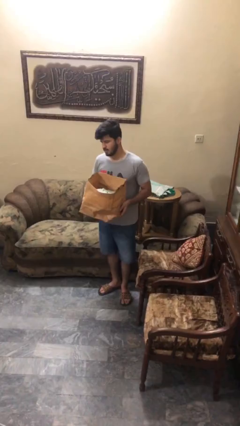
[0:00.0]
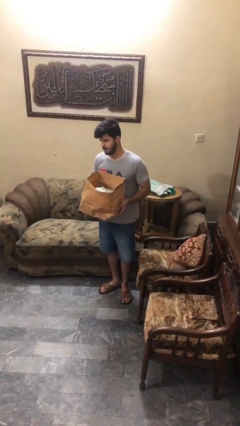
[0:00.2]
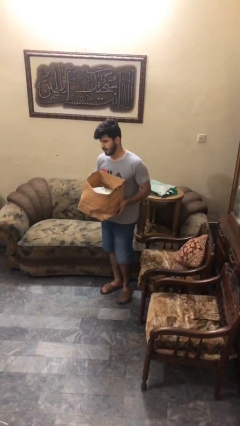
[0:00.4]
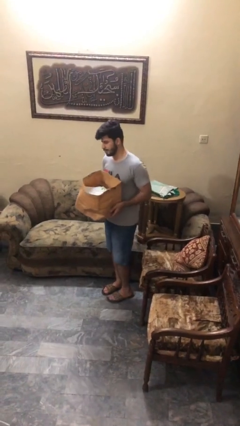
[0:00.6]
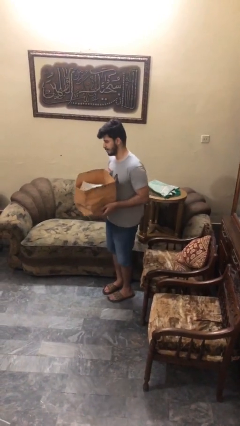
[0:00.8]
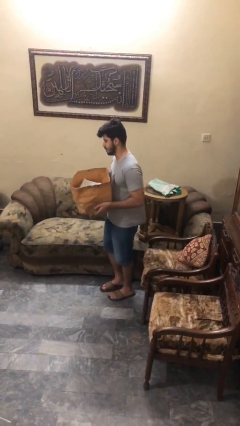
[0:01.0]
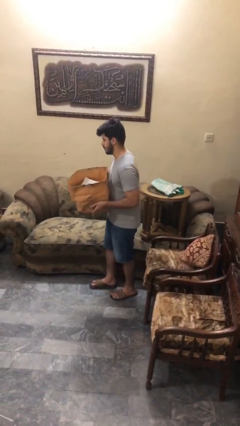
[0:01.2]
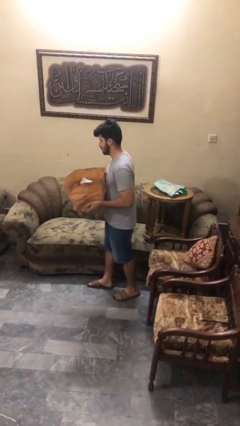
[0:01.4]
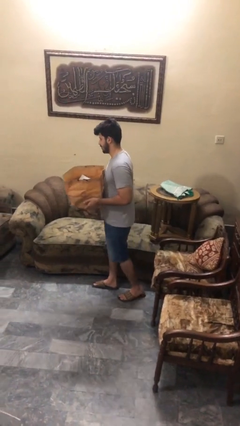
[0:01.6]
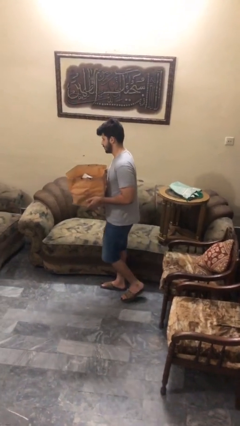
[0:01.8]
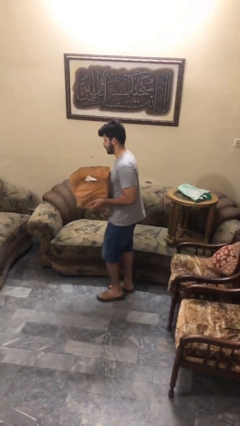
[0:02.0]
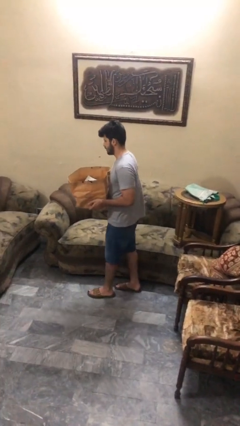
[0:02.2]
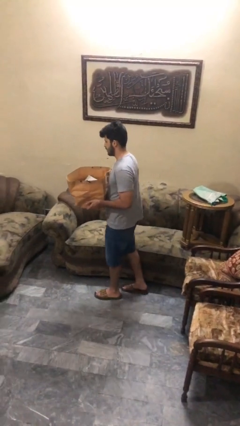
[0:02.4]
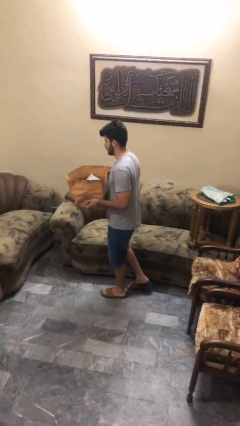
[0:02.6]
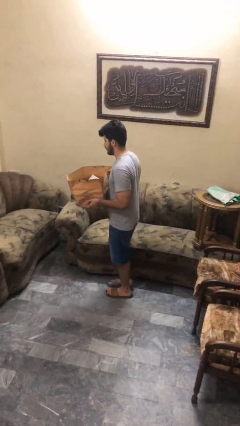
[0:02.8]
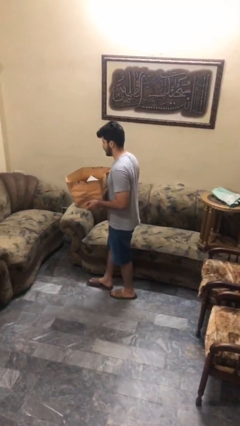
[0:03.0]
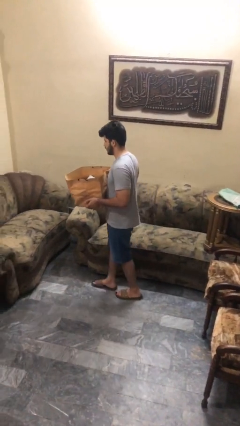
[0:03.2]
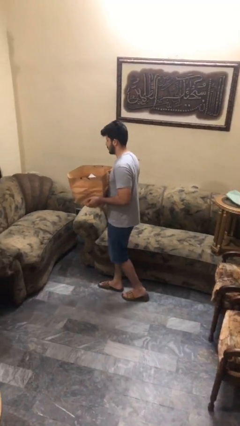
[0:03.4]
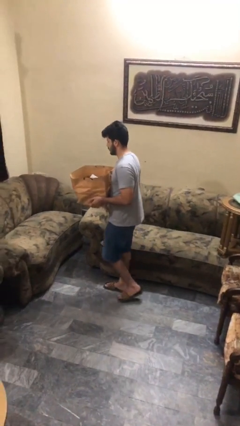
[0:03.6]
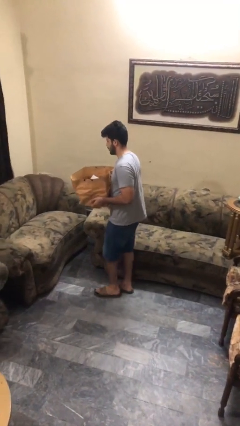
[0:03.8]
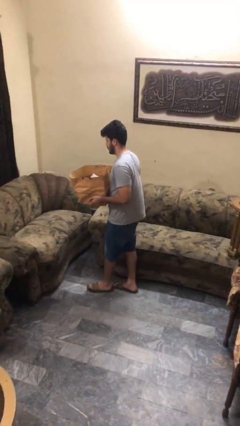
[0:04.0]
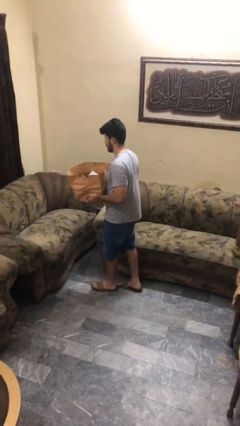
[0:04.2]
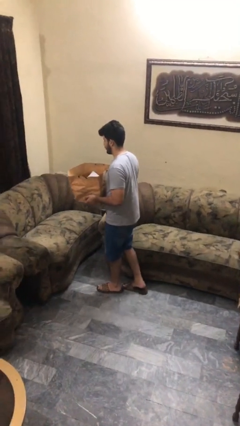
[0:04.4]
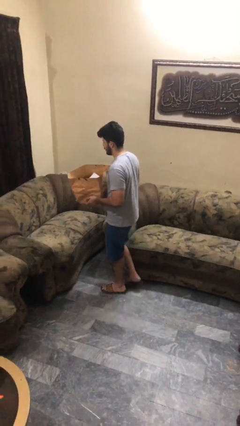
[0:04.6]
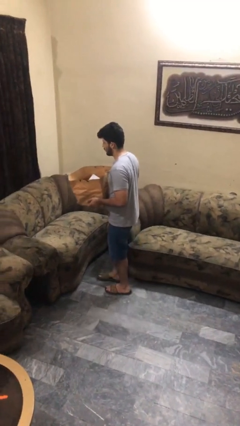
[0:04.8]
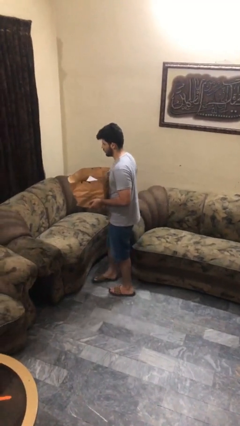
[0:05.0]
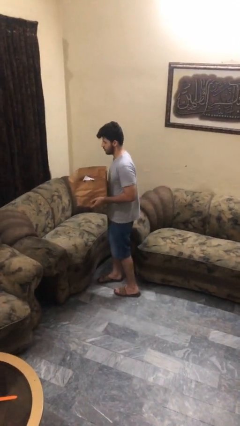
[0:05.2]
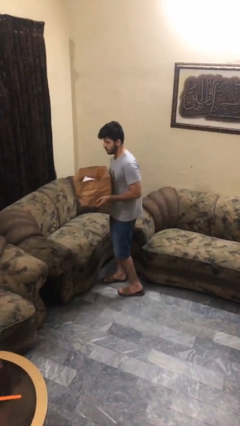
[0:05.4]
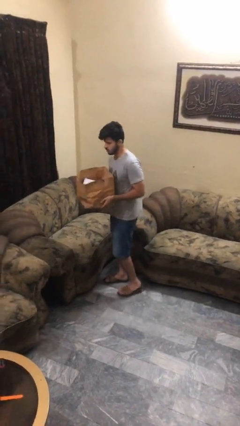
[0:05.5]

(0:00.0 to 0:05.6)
person carries groceries

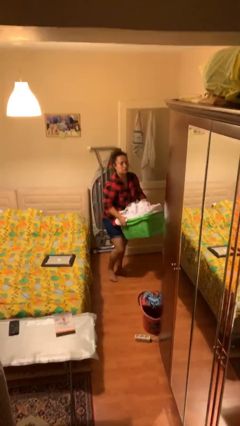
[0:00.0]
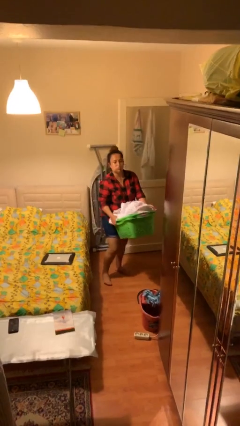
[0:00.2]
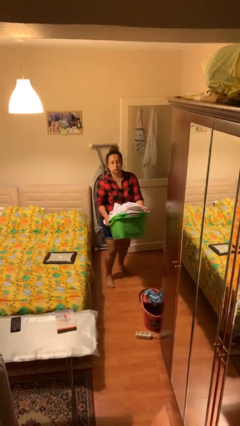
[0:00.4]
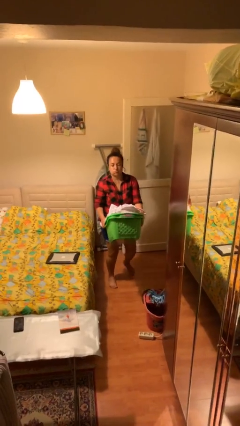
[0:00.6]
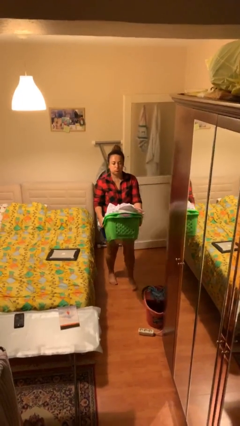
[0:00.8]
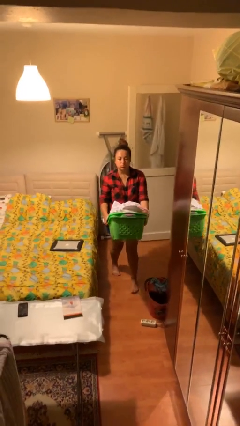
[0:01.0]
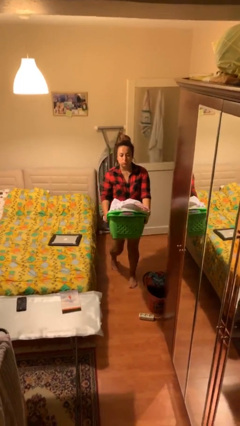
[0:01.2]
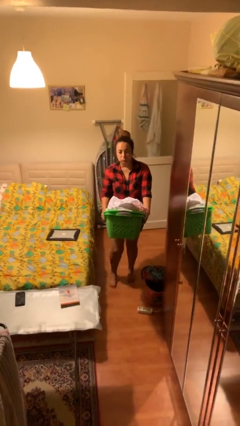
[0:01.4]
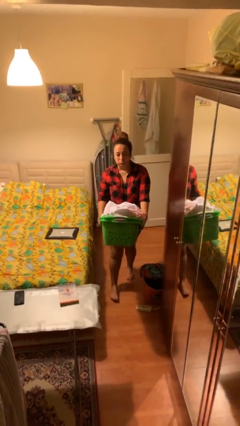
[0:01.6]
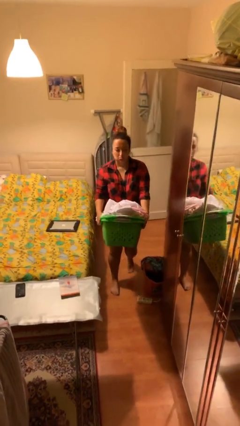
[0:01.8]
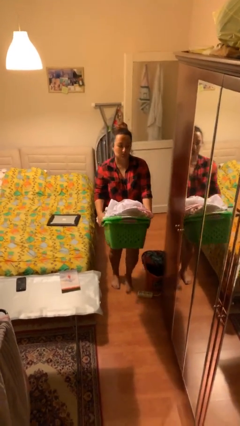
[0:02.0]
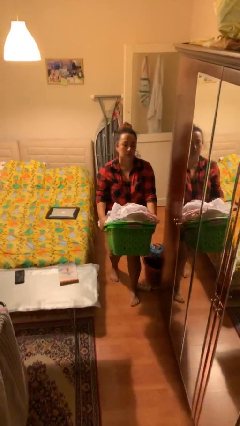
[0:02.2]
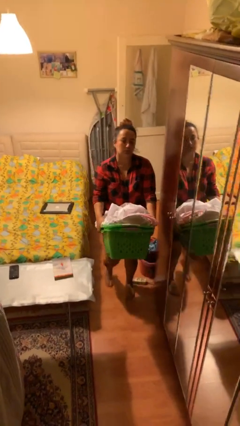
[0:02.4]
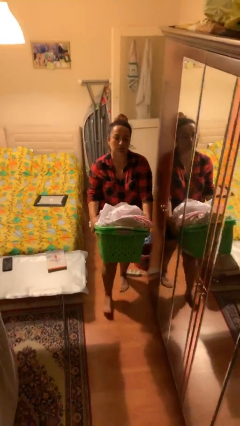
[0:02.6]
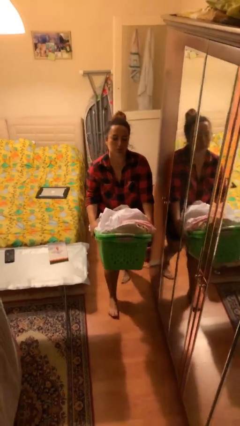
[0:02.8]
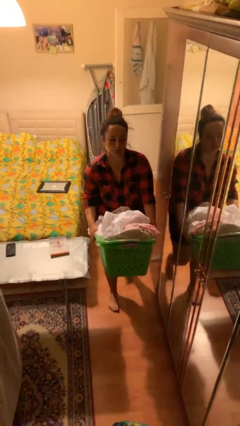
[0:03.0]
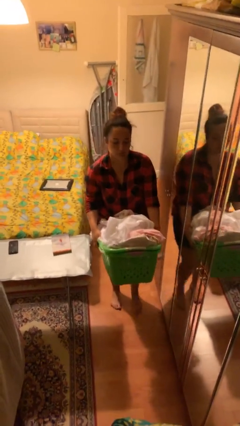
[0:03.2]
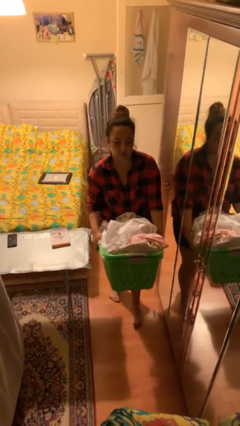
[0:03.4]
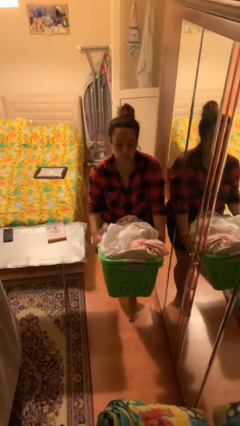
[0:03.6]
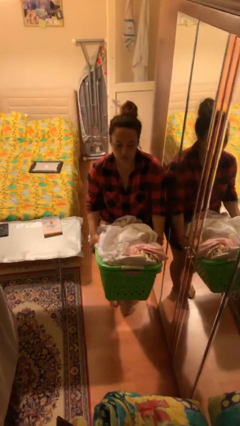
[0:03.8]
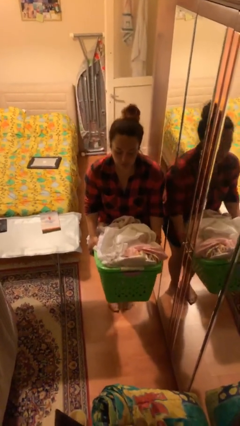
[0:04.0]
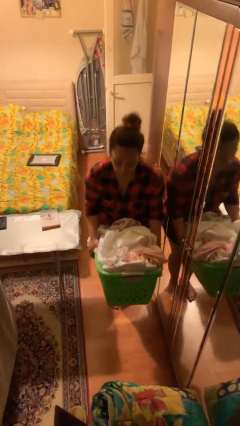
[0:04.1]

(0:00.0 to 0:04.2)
person carries heavy object

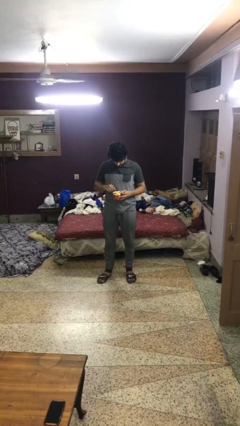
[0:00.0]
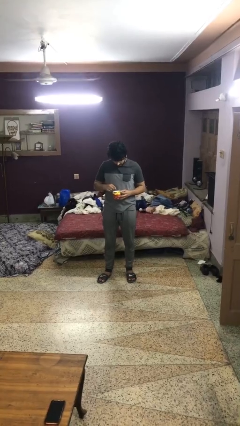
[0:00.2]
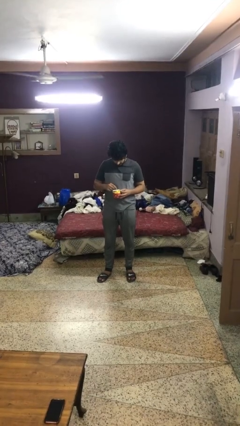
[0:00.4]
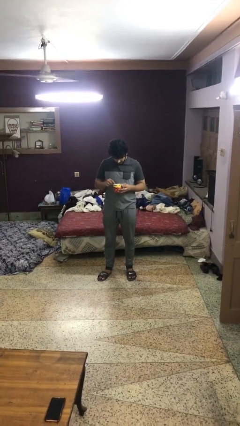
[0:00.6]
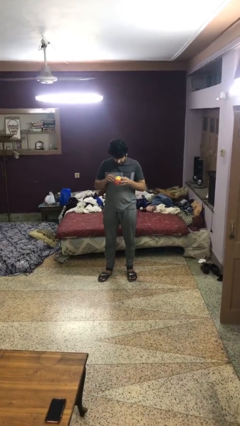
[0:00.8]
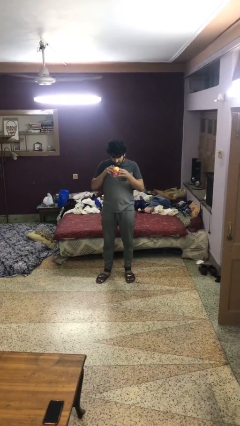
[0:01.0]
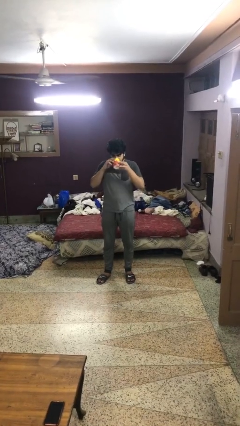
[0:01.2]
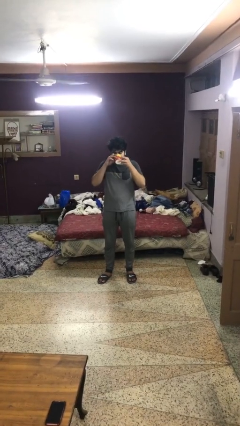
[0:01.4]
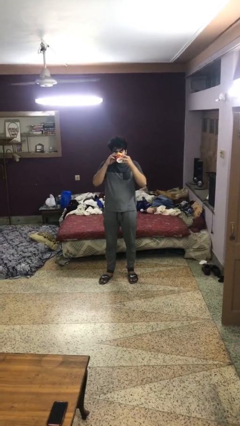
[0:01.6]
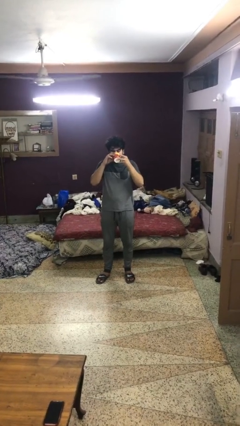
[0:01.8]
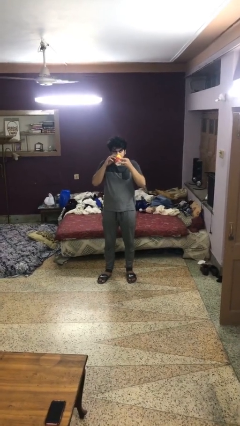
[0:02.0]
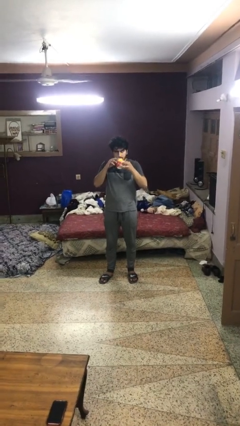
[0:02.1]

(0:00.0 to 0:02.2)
person drinks from mug

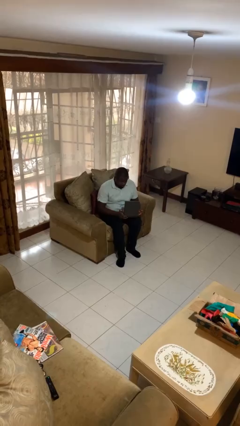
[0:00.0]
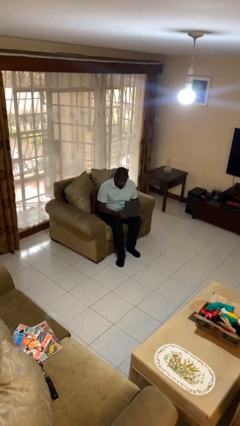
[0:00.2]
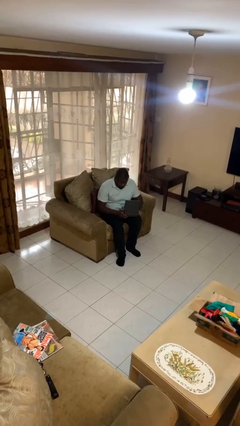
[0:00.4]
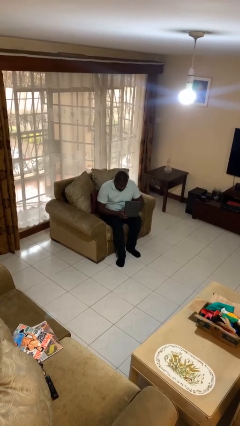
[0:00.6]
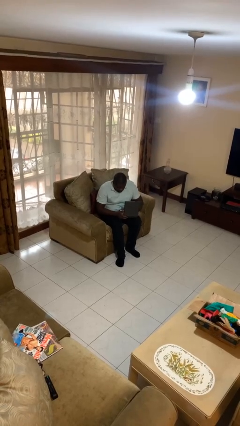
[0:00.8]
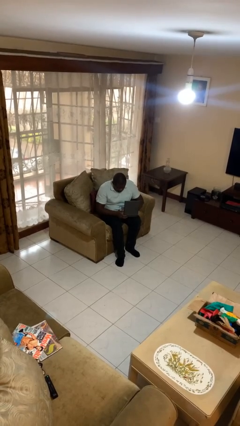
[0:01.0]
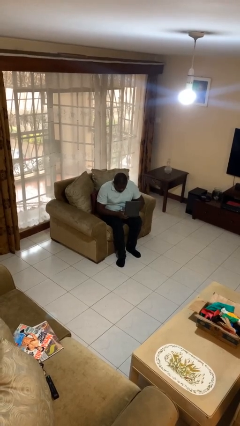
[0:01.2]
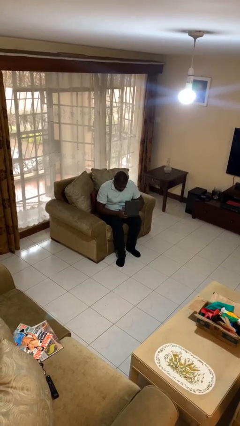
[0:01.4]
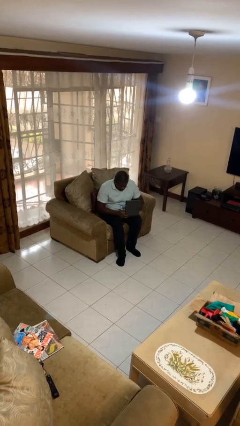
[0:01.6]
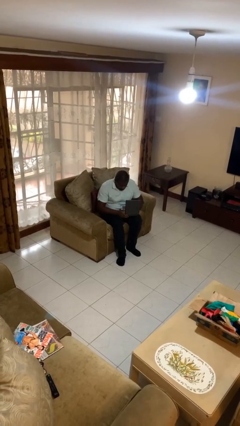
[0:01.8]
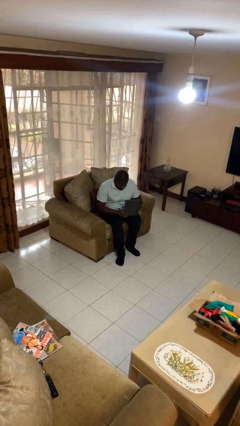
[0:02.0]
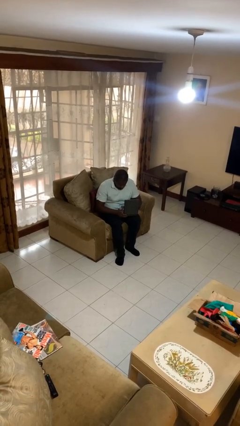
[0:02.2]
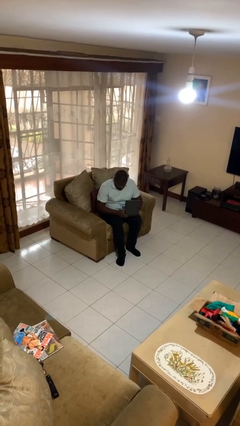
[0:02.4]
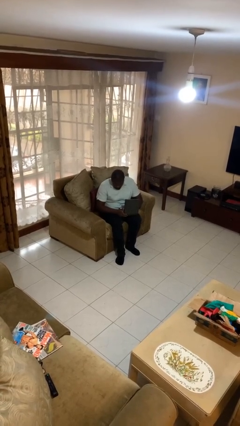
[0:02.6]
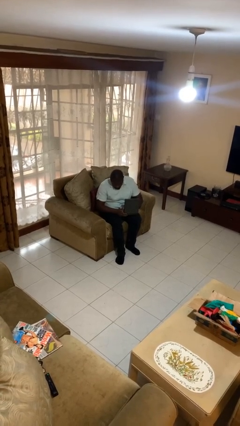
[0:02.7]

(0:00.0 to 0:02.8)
person searches jewelry box

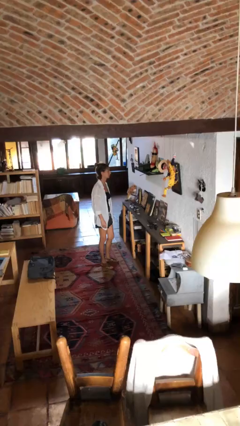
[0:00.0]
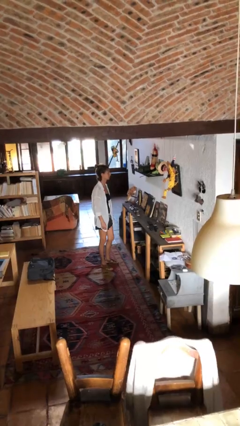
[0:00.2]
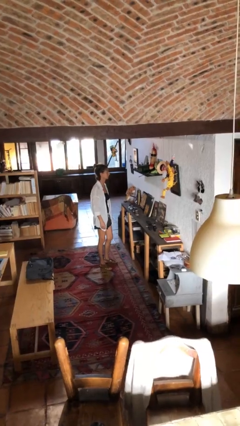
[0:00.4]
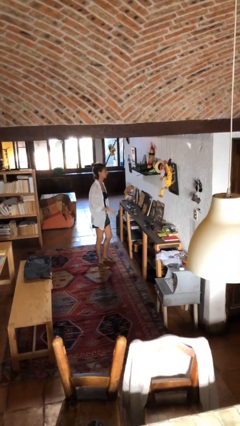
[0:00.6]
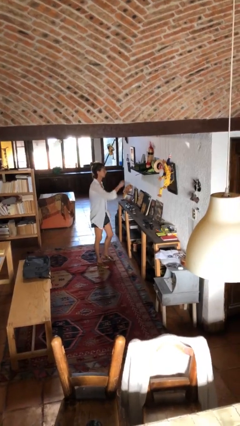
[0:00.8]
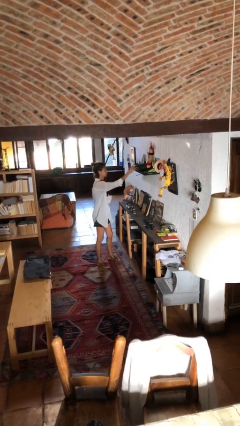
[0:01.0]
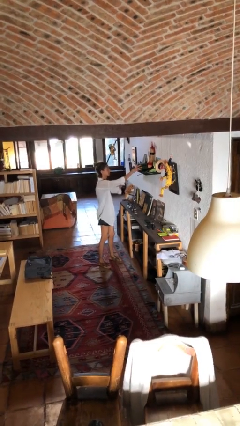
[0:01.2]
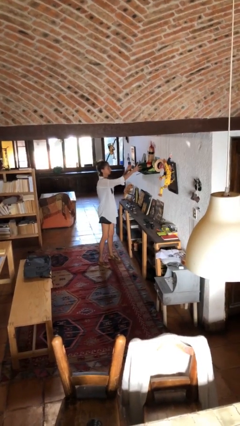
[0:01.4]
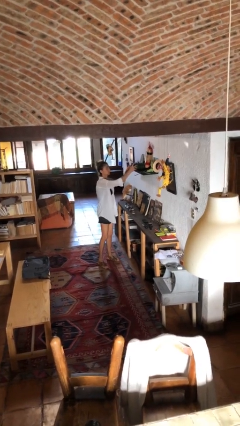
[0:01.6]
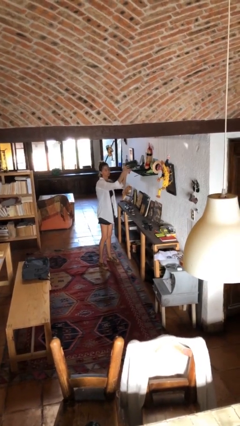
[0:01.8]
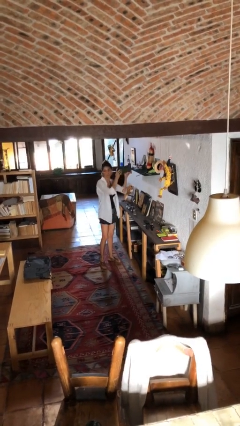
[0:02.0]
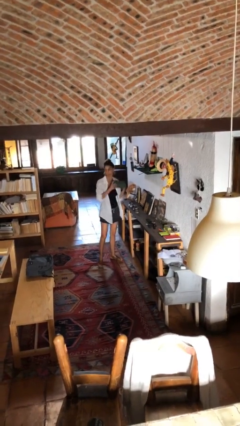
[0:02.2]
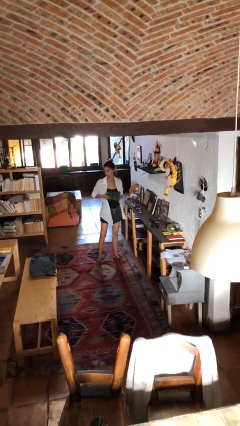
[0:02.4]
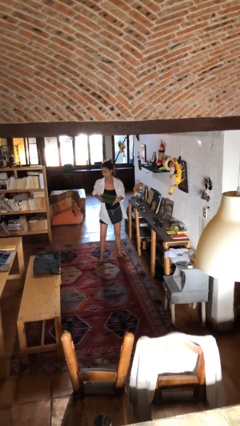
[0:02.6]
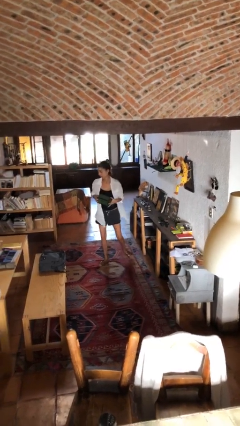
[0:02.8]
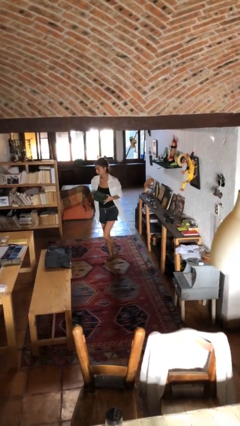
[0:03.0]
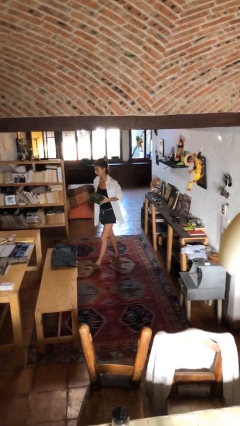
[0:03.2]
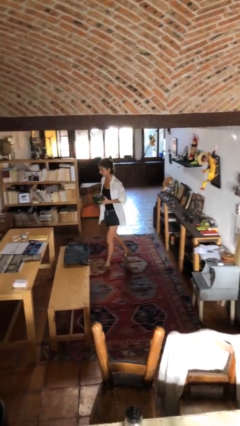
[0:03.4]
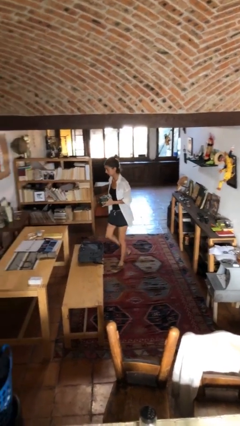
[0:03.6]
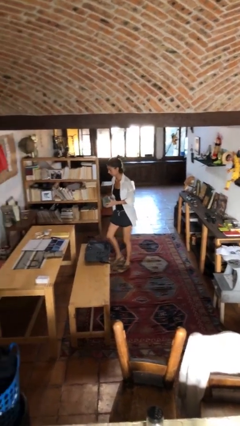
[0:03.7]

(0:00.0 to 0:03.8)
person picks up object from shelf
